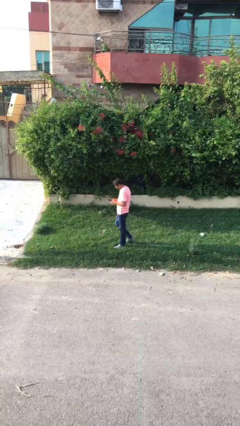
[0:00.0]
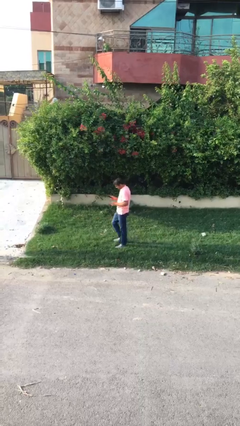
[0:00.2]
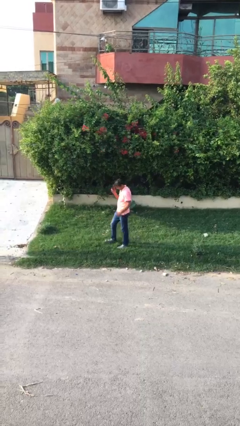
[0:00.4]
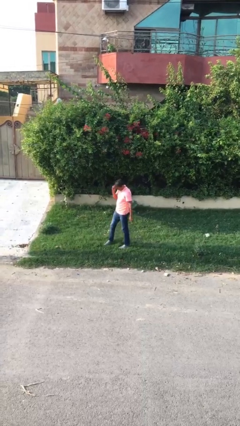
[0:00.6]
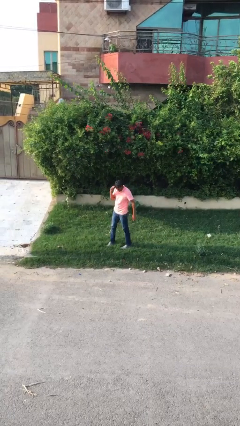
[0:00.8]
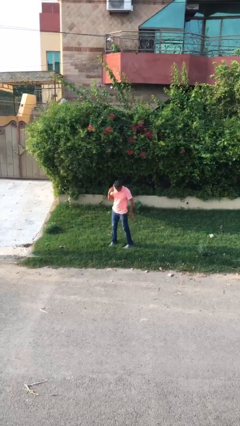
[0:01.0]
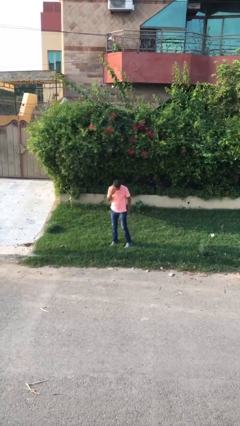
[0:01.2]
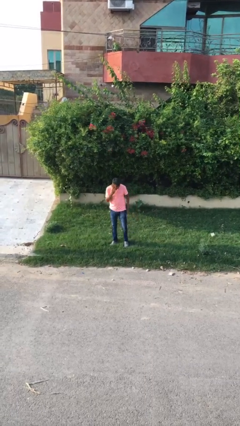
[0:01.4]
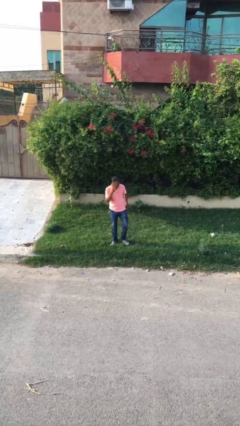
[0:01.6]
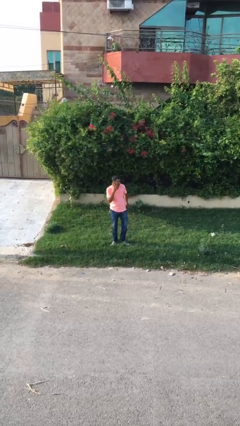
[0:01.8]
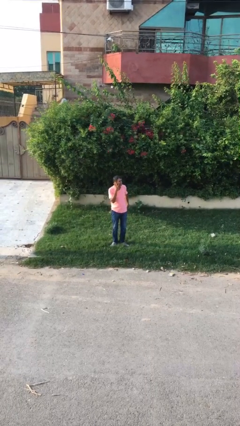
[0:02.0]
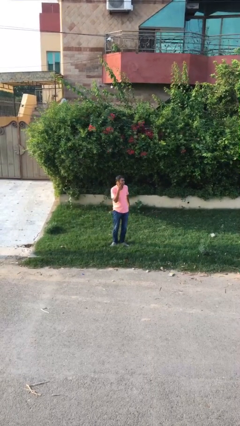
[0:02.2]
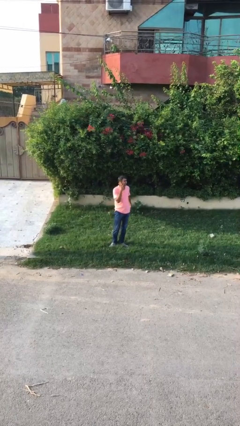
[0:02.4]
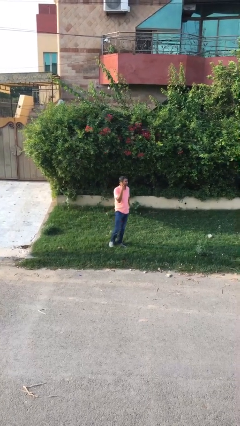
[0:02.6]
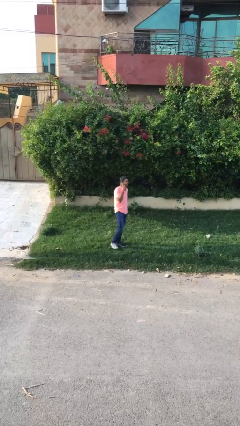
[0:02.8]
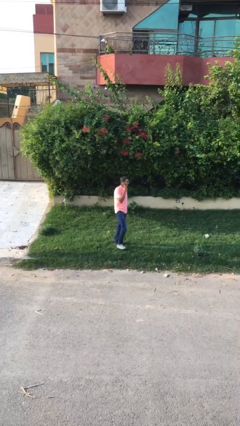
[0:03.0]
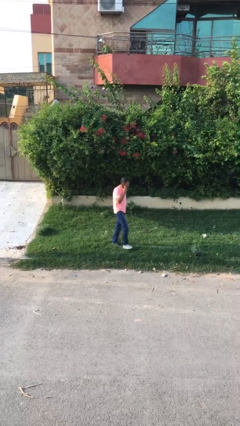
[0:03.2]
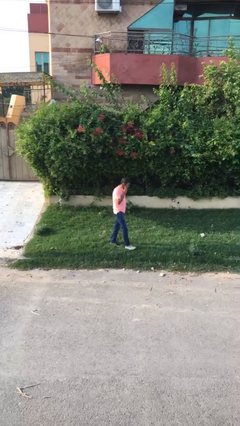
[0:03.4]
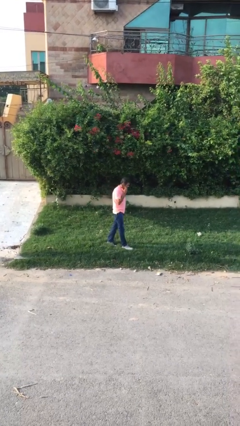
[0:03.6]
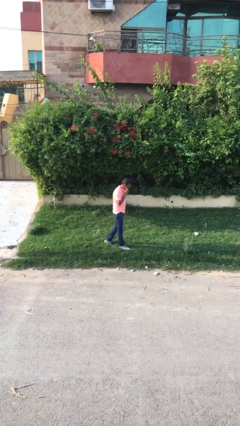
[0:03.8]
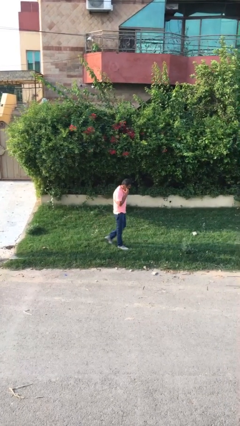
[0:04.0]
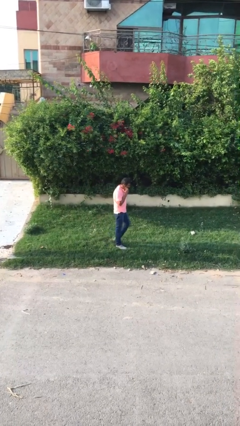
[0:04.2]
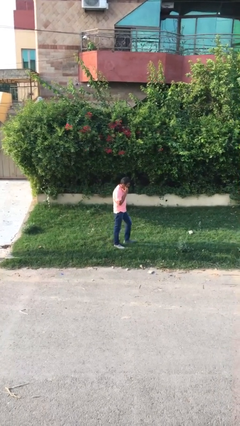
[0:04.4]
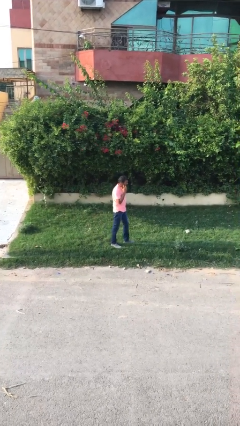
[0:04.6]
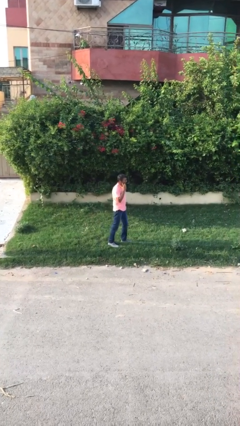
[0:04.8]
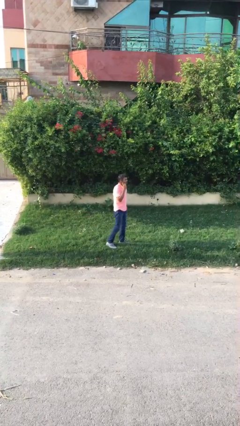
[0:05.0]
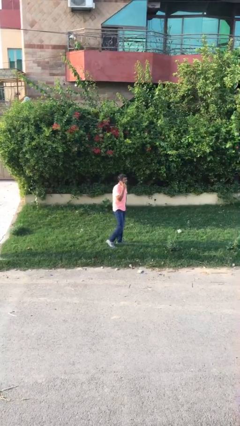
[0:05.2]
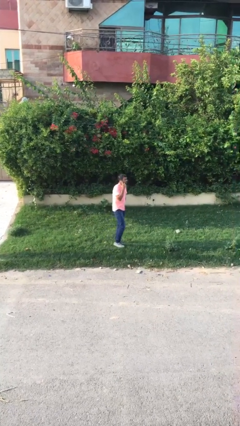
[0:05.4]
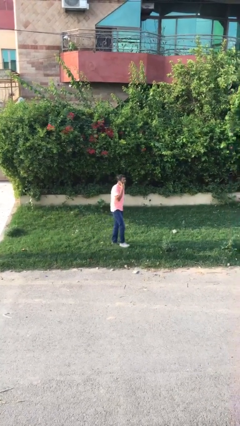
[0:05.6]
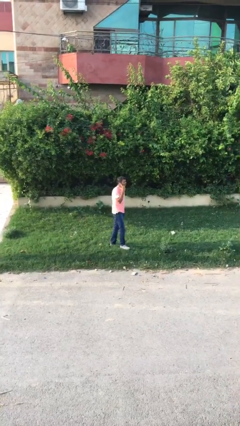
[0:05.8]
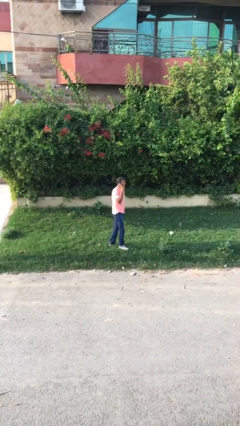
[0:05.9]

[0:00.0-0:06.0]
person talks on phone

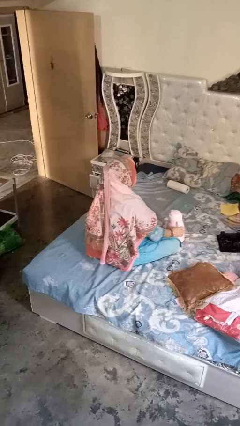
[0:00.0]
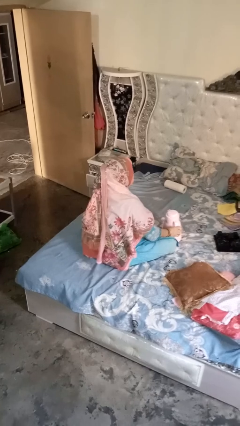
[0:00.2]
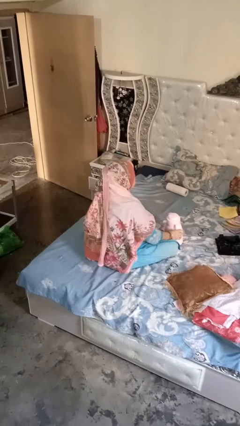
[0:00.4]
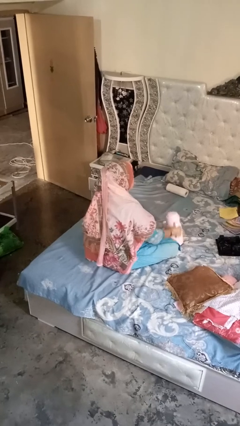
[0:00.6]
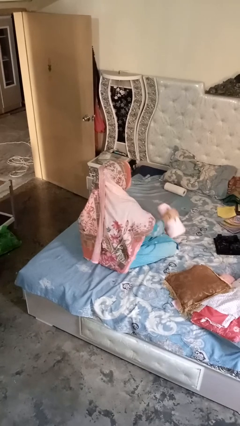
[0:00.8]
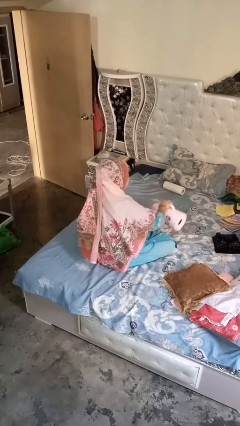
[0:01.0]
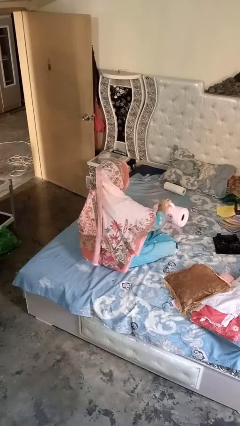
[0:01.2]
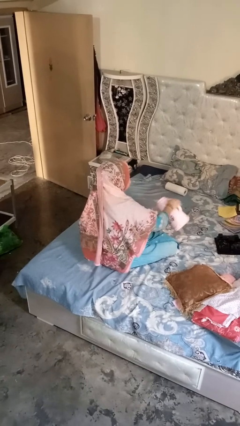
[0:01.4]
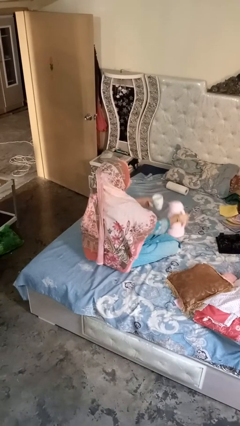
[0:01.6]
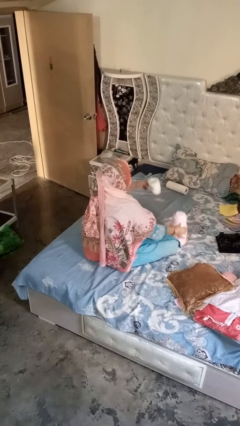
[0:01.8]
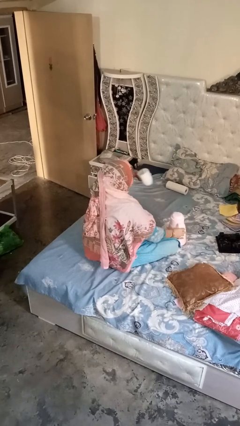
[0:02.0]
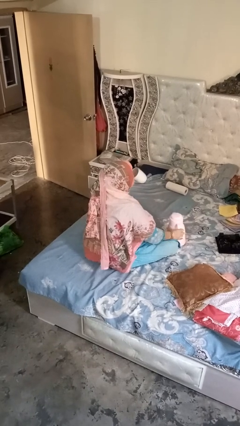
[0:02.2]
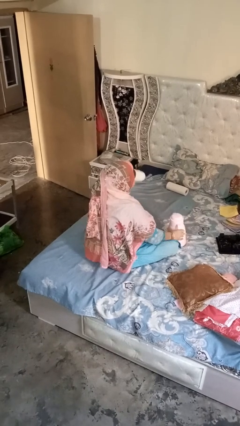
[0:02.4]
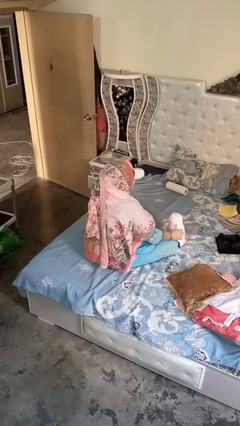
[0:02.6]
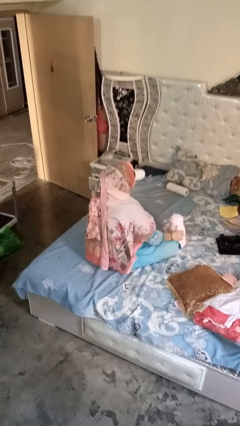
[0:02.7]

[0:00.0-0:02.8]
person pours coffee into mug

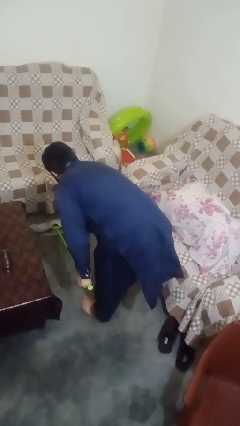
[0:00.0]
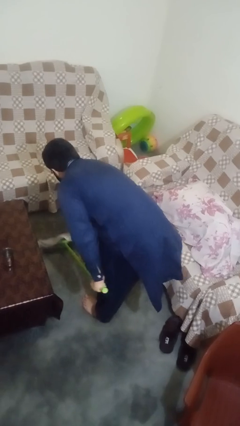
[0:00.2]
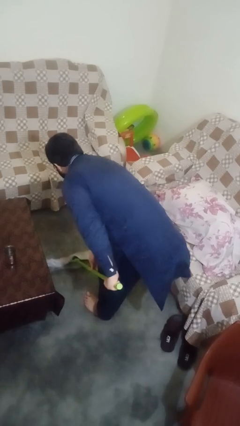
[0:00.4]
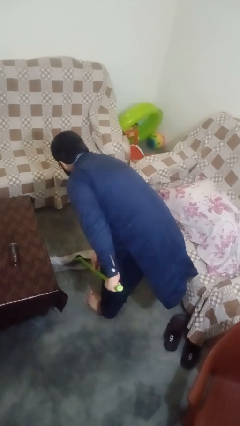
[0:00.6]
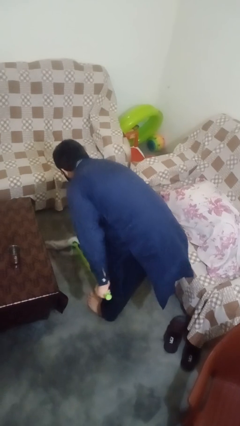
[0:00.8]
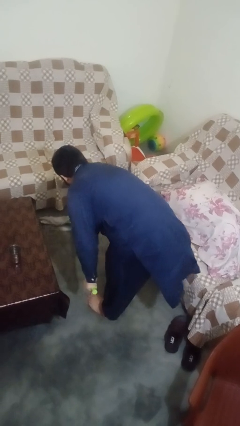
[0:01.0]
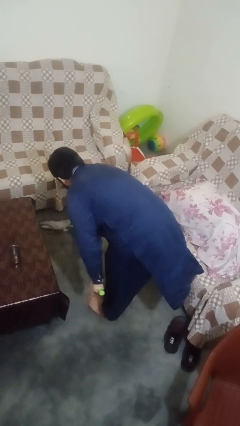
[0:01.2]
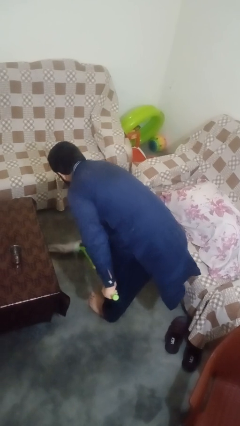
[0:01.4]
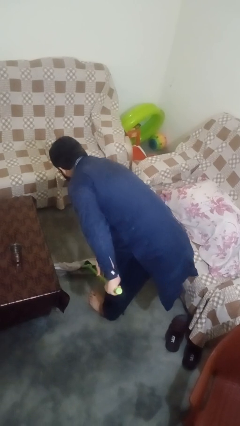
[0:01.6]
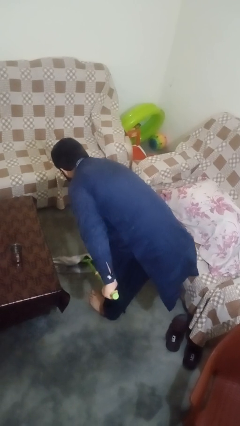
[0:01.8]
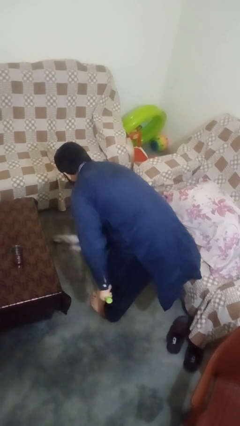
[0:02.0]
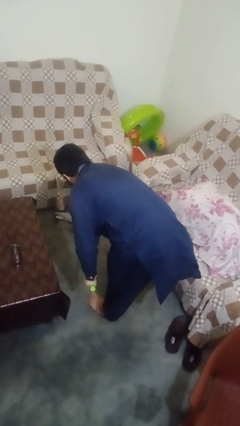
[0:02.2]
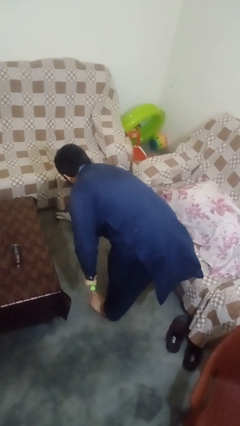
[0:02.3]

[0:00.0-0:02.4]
person mops

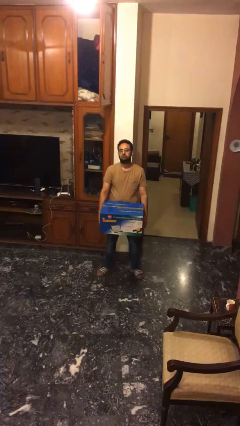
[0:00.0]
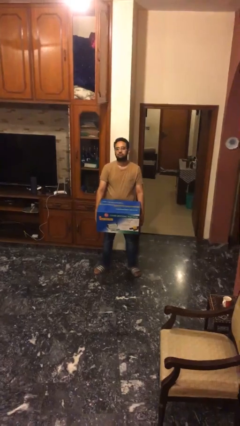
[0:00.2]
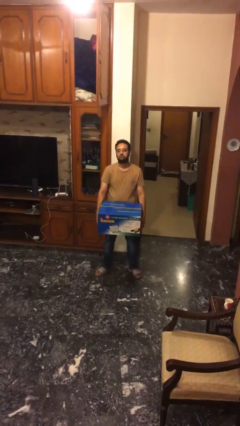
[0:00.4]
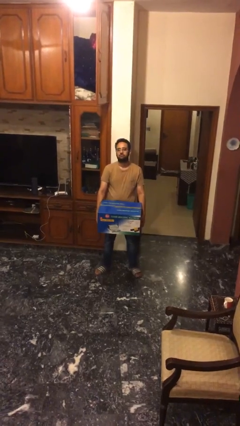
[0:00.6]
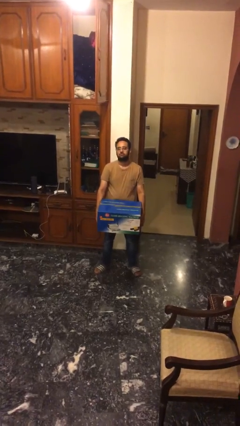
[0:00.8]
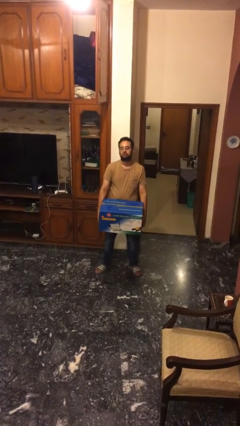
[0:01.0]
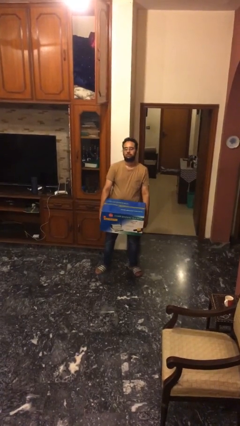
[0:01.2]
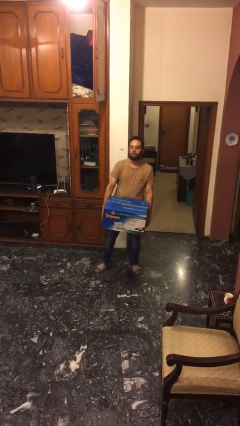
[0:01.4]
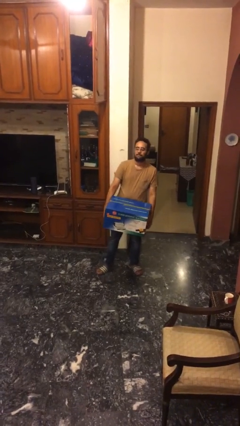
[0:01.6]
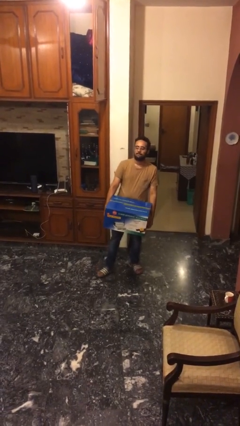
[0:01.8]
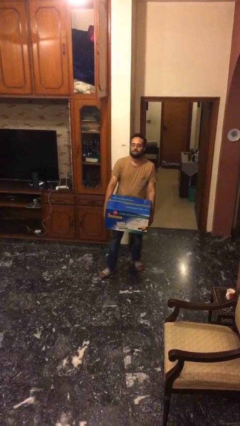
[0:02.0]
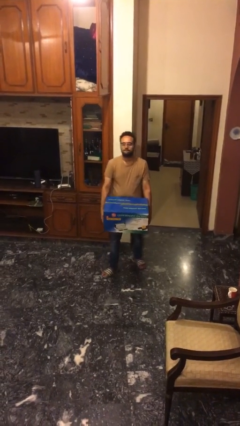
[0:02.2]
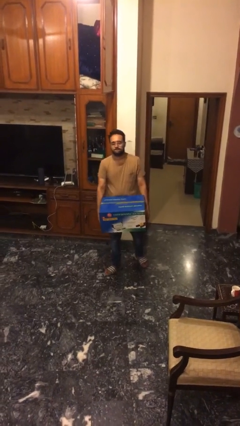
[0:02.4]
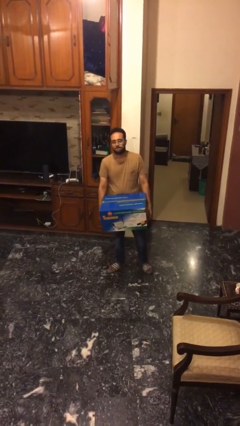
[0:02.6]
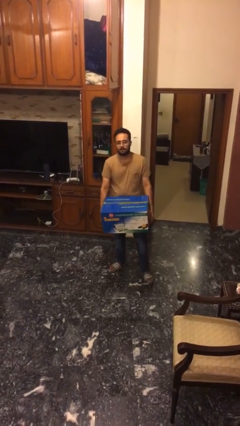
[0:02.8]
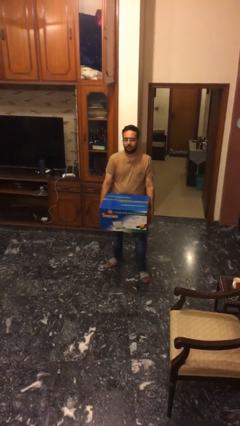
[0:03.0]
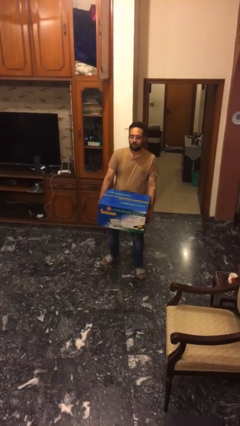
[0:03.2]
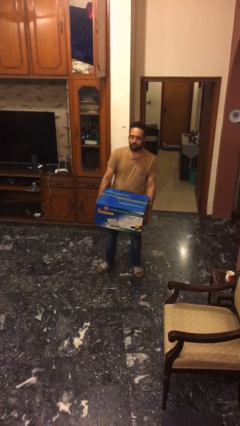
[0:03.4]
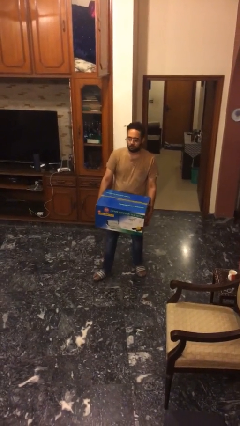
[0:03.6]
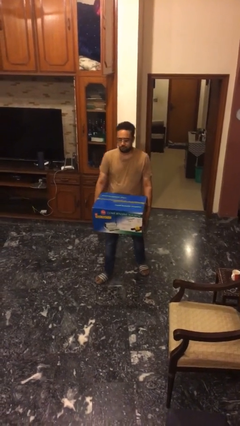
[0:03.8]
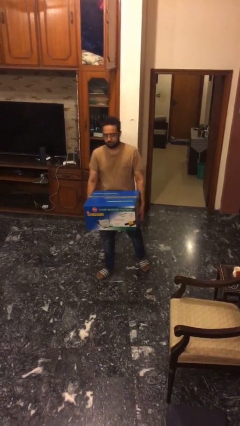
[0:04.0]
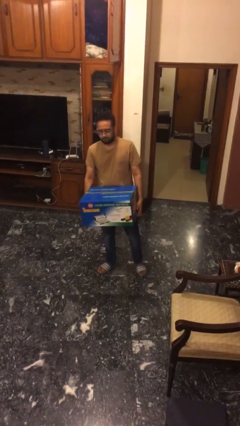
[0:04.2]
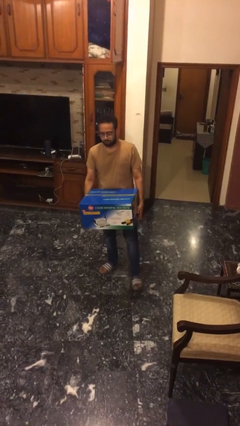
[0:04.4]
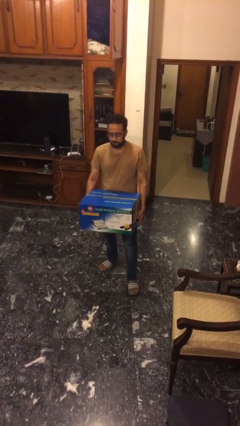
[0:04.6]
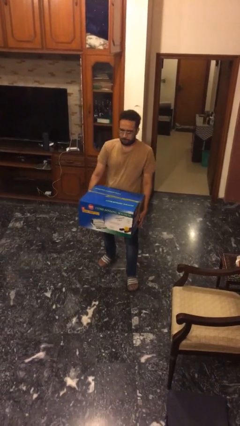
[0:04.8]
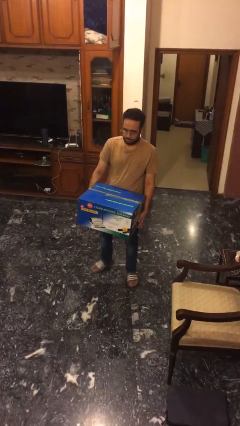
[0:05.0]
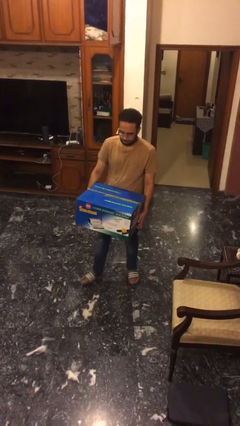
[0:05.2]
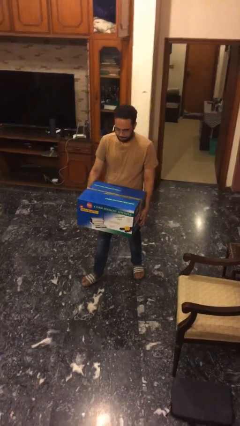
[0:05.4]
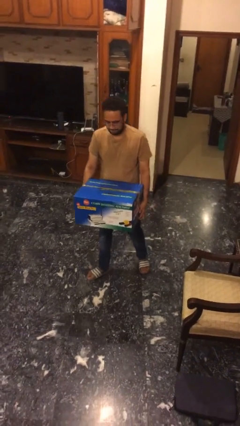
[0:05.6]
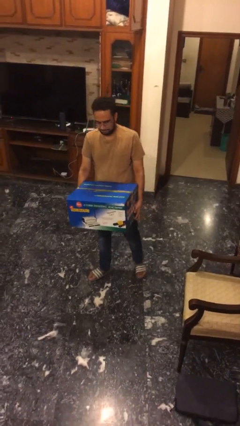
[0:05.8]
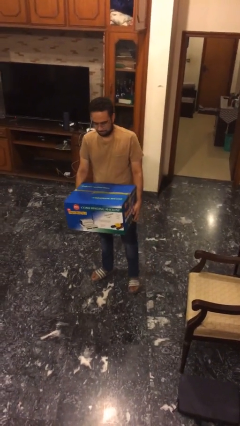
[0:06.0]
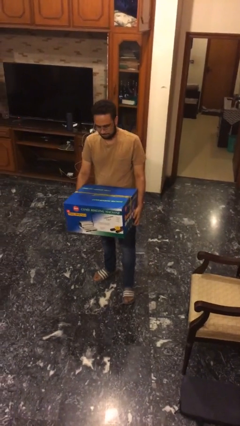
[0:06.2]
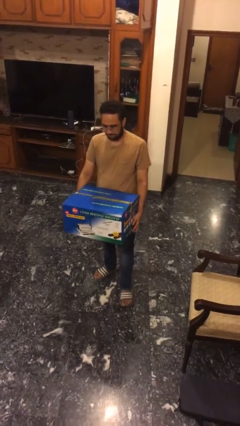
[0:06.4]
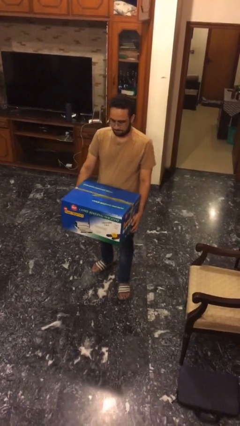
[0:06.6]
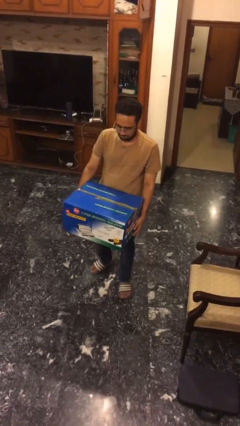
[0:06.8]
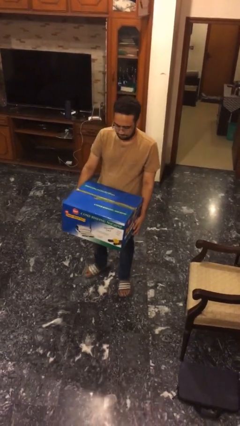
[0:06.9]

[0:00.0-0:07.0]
person carries heavy object
